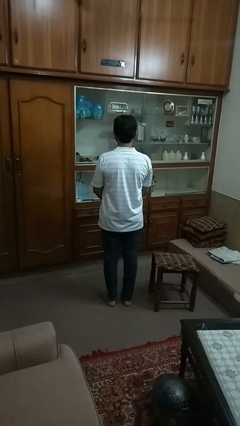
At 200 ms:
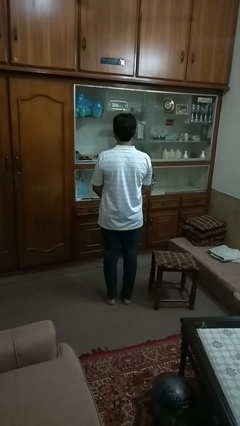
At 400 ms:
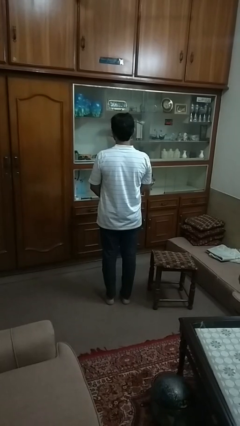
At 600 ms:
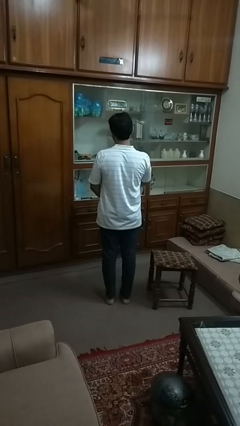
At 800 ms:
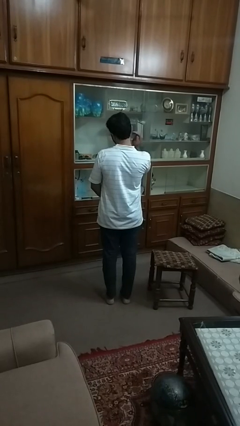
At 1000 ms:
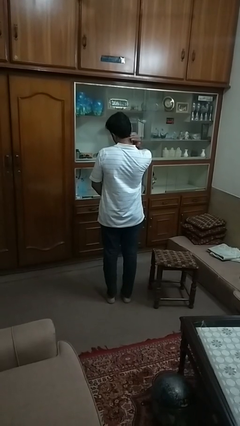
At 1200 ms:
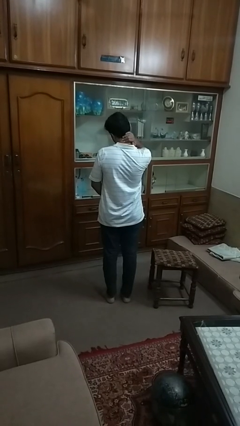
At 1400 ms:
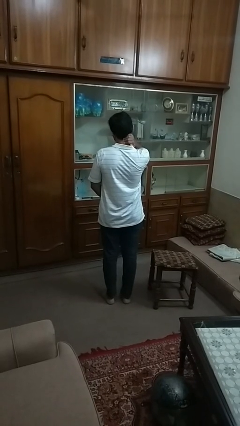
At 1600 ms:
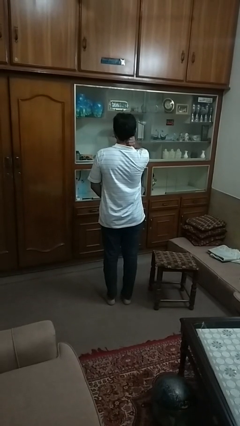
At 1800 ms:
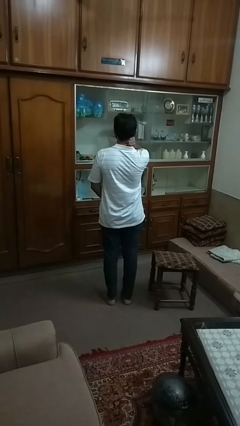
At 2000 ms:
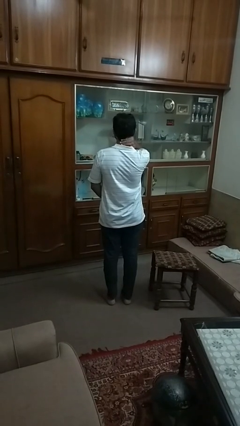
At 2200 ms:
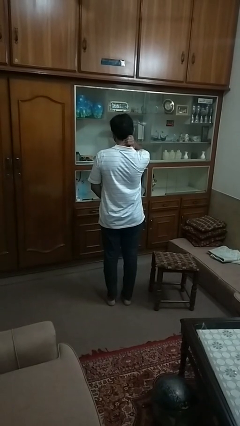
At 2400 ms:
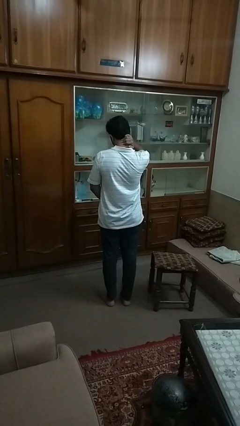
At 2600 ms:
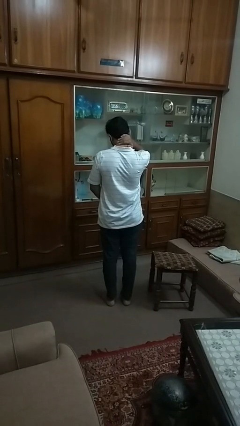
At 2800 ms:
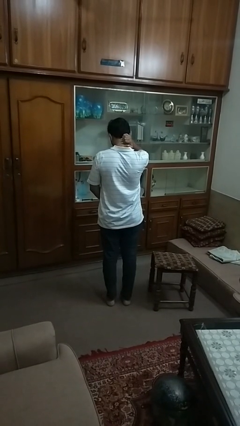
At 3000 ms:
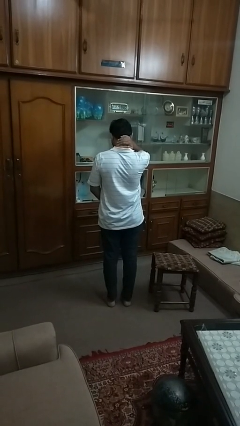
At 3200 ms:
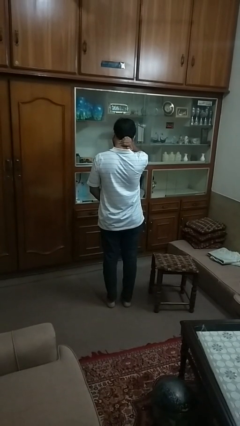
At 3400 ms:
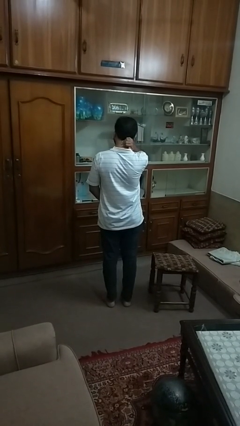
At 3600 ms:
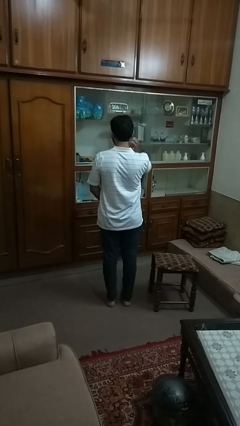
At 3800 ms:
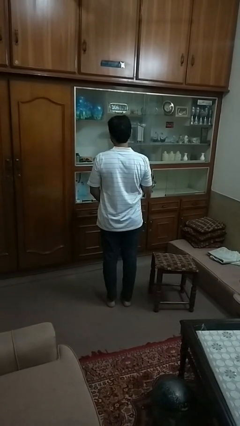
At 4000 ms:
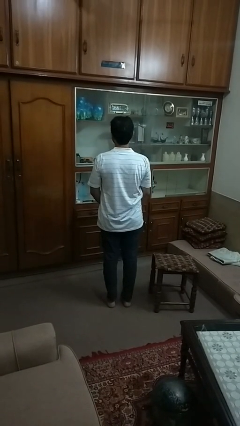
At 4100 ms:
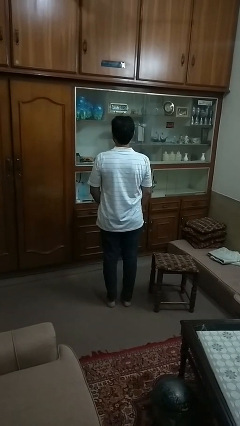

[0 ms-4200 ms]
person rubs neck

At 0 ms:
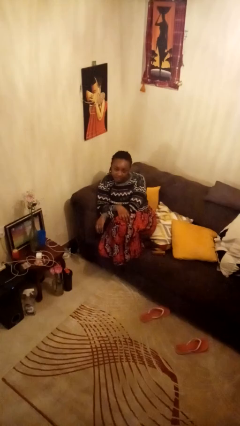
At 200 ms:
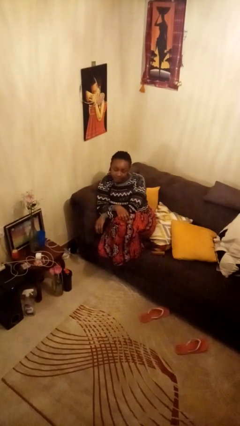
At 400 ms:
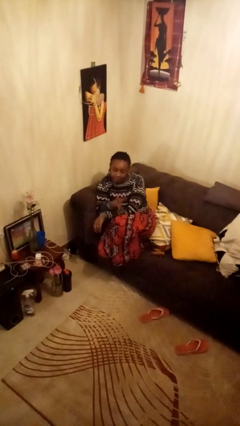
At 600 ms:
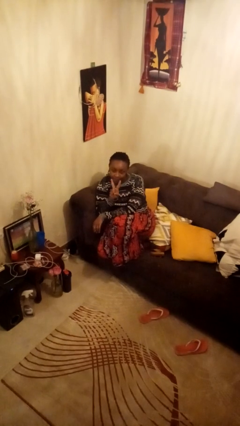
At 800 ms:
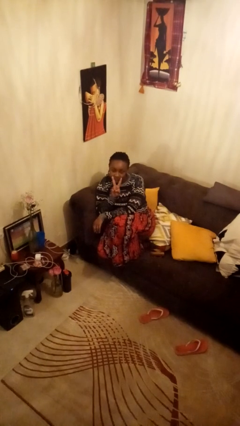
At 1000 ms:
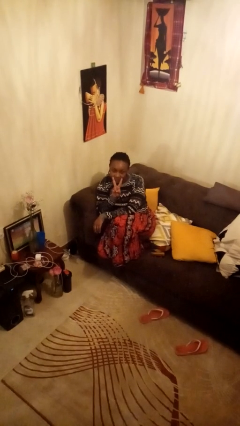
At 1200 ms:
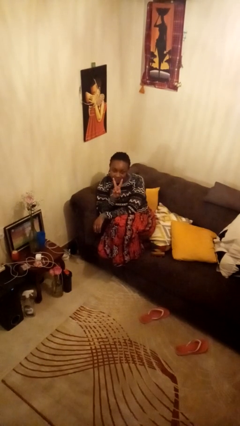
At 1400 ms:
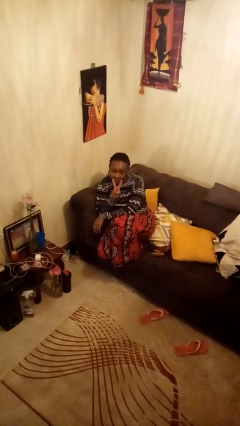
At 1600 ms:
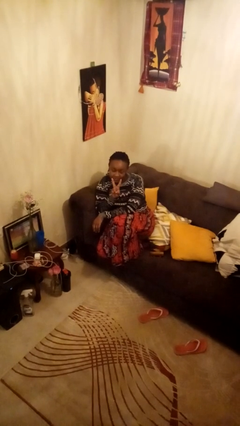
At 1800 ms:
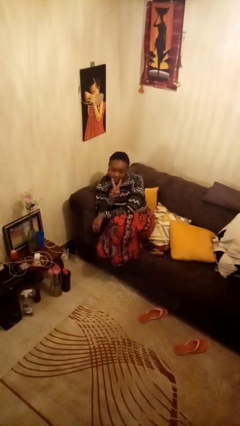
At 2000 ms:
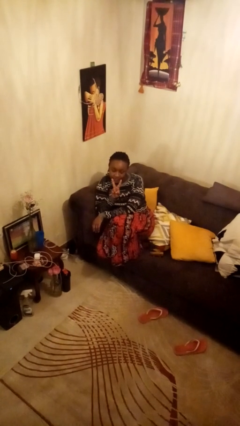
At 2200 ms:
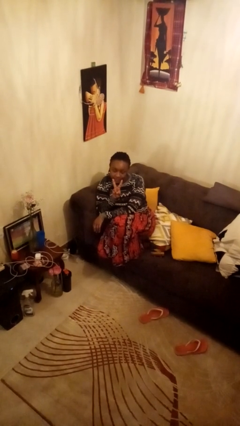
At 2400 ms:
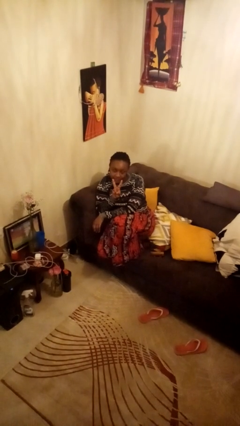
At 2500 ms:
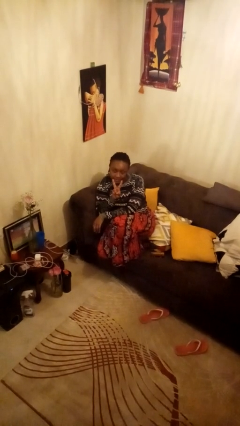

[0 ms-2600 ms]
person gestures peace

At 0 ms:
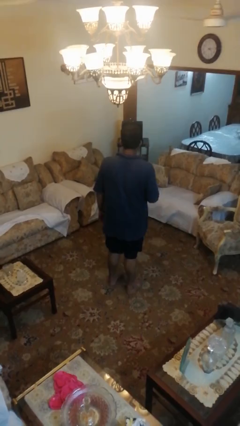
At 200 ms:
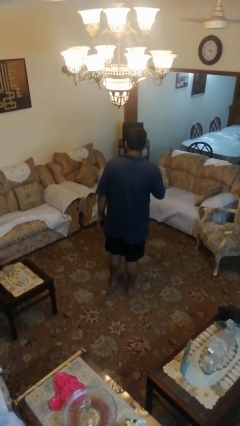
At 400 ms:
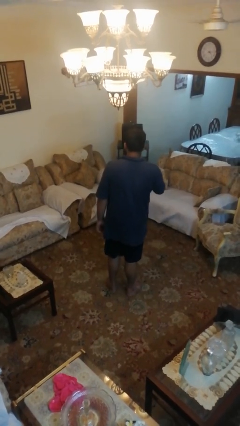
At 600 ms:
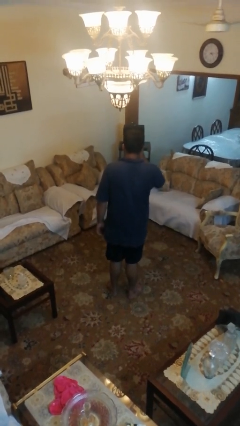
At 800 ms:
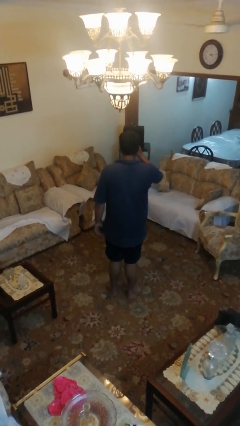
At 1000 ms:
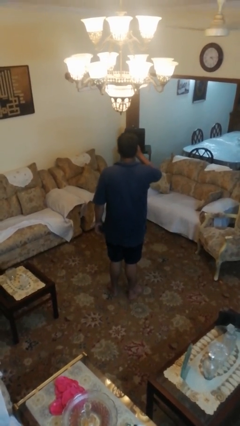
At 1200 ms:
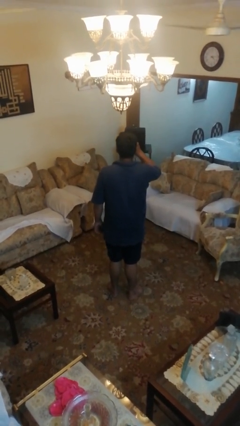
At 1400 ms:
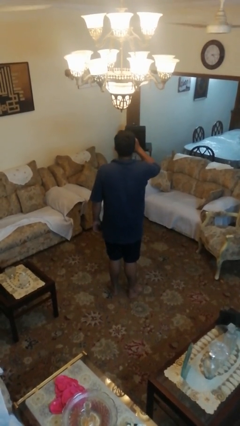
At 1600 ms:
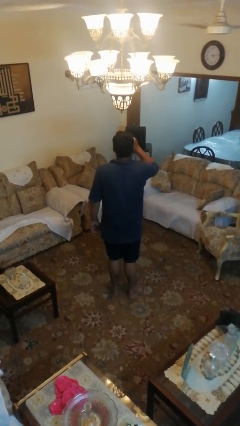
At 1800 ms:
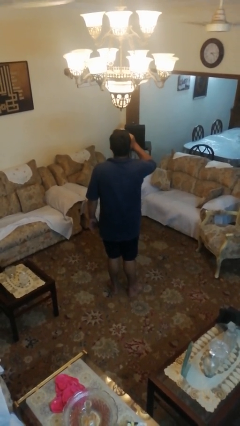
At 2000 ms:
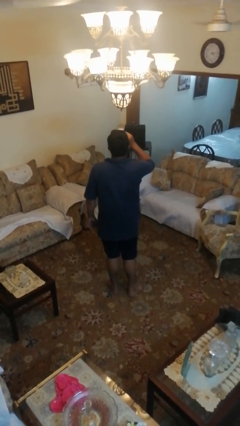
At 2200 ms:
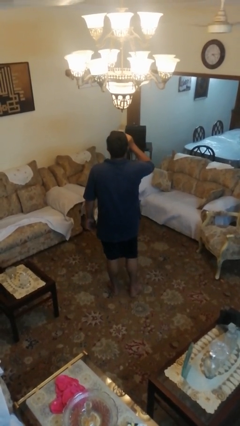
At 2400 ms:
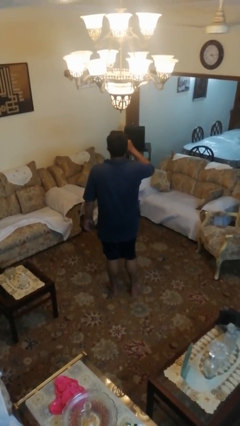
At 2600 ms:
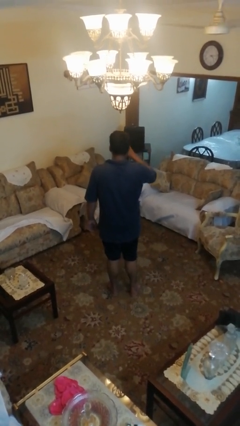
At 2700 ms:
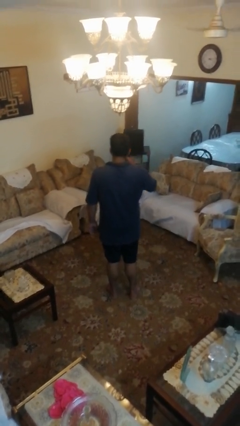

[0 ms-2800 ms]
person drinks from bottle

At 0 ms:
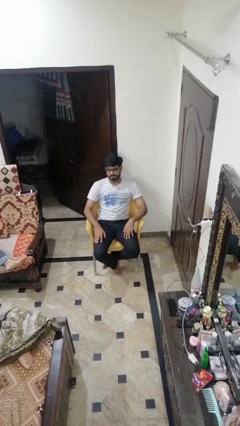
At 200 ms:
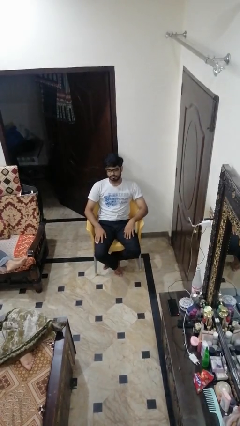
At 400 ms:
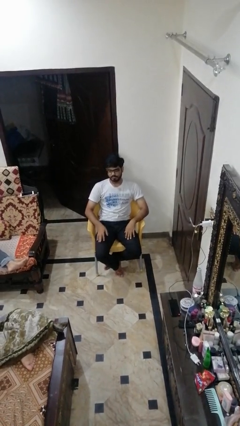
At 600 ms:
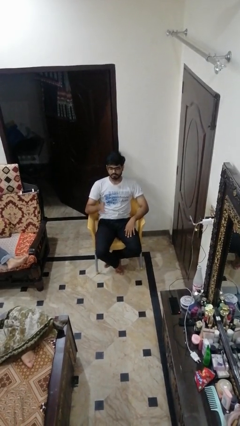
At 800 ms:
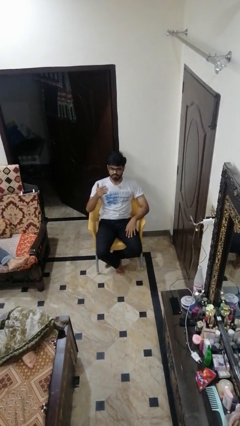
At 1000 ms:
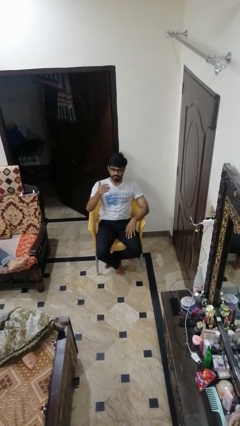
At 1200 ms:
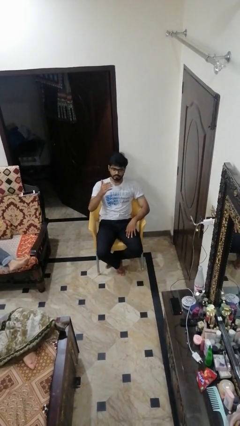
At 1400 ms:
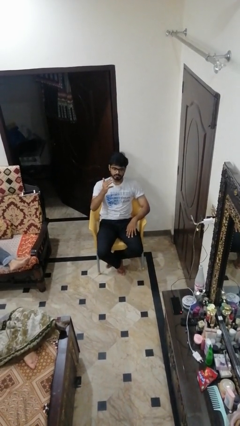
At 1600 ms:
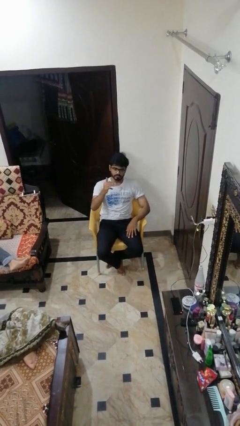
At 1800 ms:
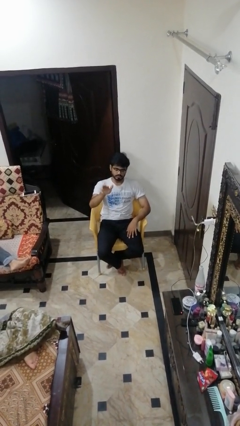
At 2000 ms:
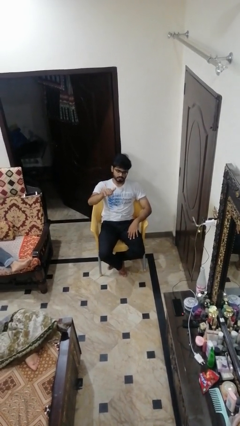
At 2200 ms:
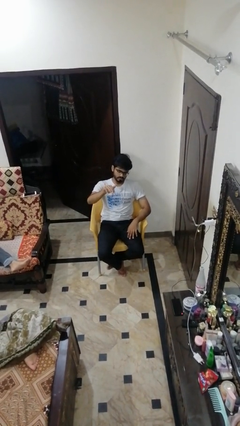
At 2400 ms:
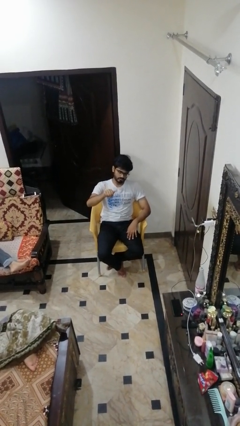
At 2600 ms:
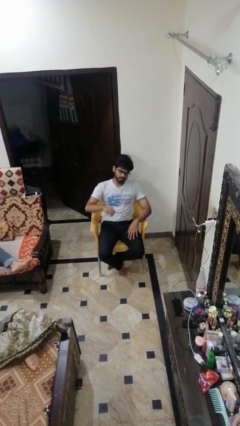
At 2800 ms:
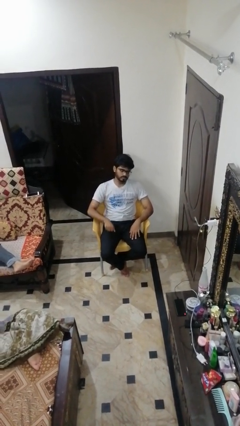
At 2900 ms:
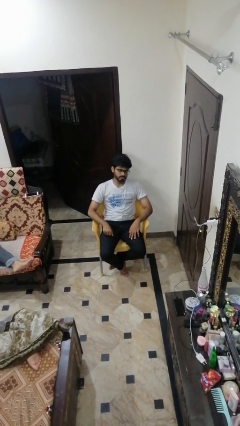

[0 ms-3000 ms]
person gestures come here

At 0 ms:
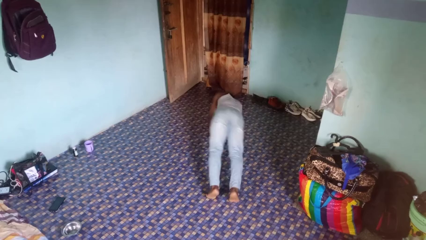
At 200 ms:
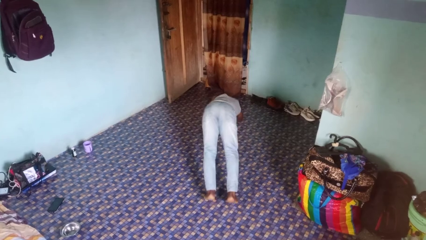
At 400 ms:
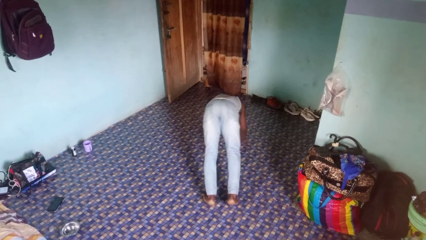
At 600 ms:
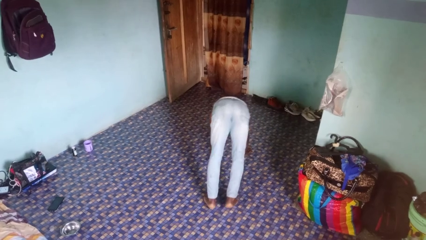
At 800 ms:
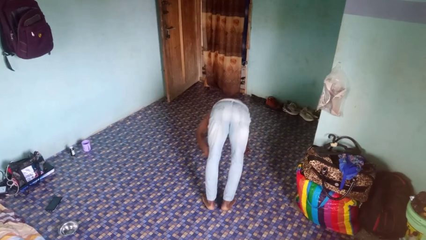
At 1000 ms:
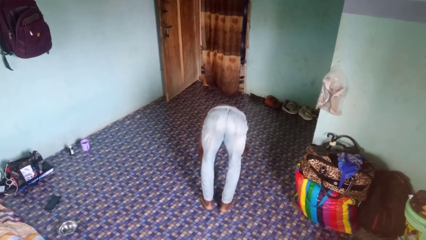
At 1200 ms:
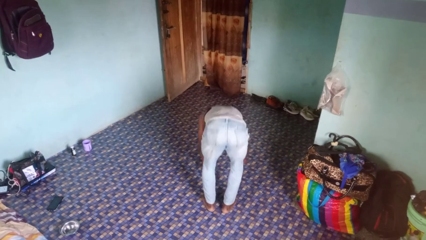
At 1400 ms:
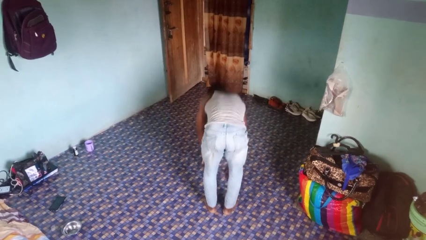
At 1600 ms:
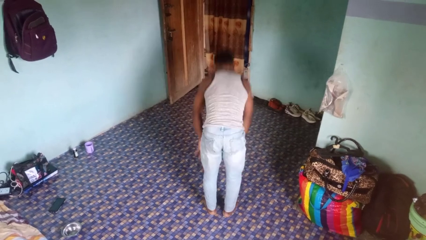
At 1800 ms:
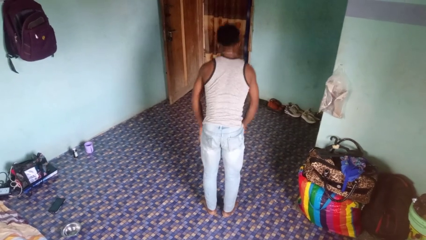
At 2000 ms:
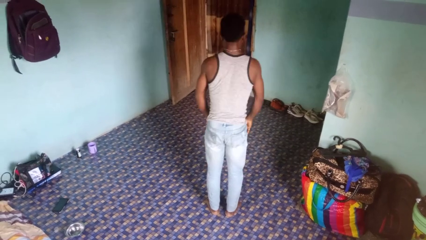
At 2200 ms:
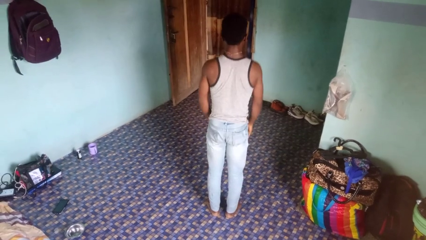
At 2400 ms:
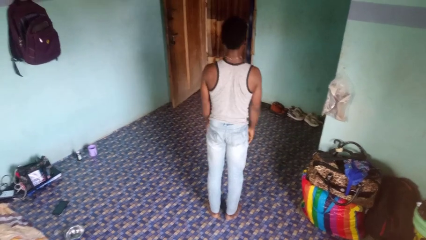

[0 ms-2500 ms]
person stands up from floor

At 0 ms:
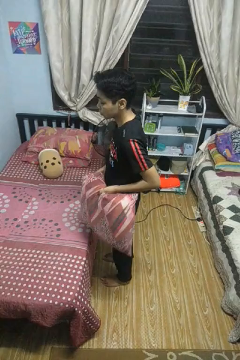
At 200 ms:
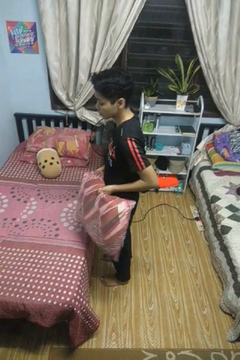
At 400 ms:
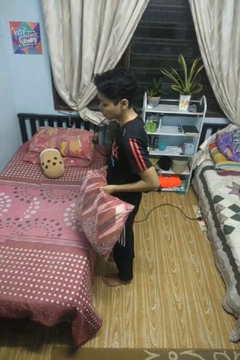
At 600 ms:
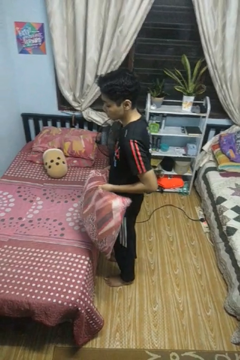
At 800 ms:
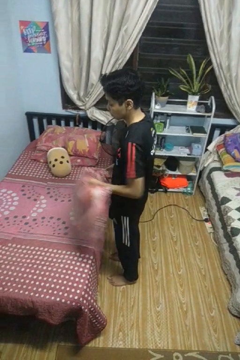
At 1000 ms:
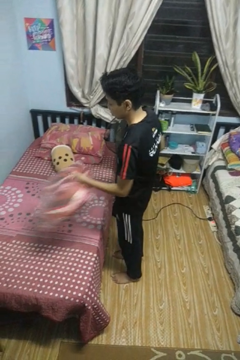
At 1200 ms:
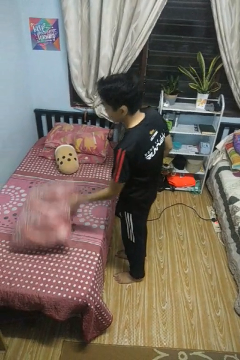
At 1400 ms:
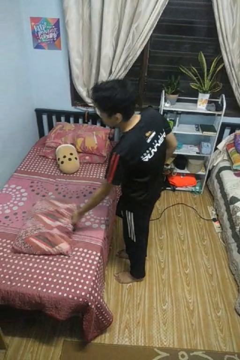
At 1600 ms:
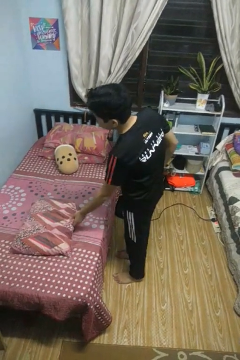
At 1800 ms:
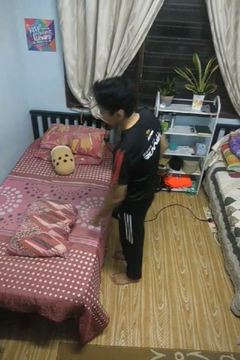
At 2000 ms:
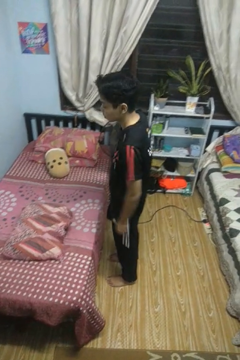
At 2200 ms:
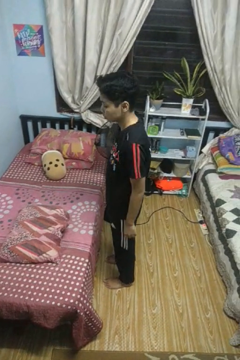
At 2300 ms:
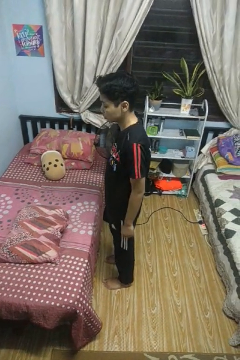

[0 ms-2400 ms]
person puts down object on bed

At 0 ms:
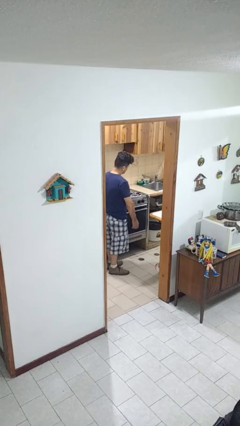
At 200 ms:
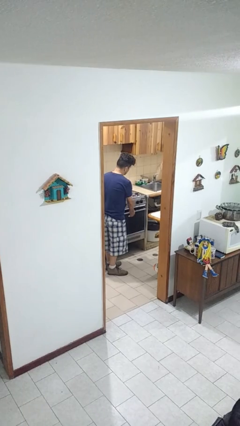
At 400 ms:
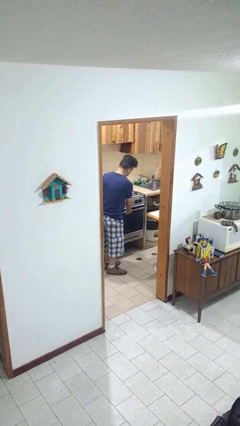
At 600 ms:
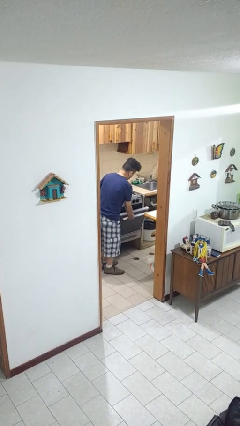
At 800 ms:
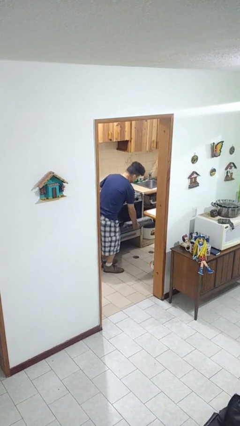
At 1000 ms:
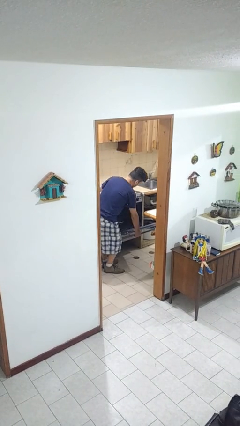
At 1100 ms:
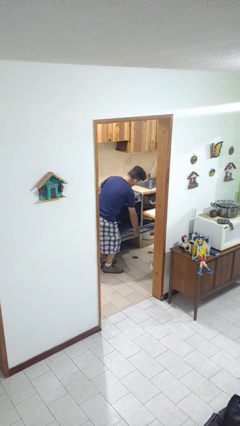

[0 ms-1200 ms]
person opens oven door
